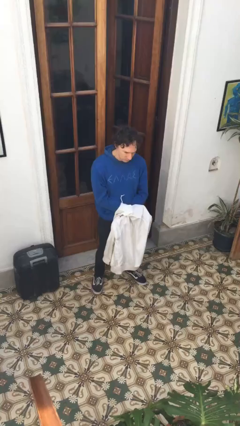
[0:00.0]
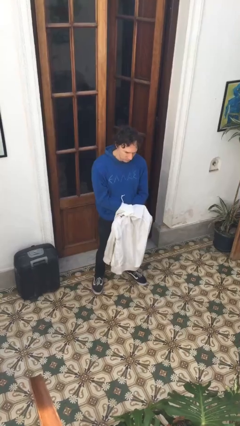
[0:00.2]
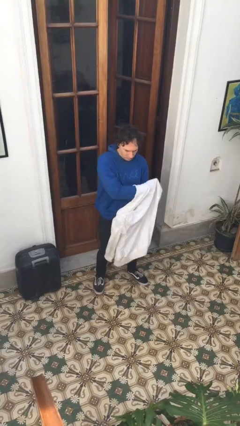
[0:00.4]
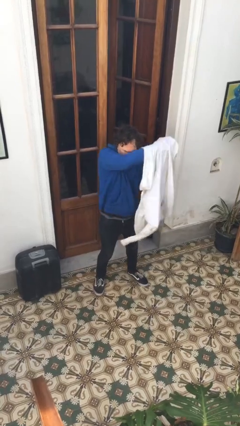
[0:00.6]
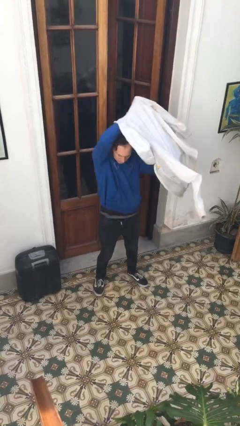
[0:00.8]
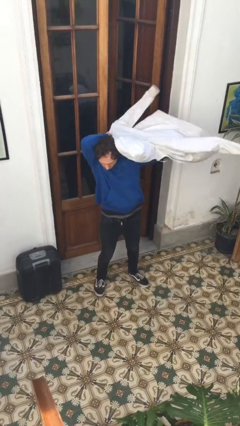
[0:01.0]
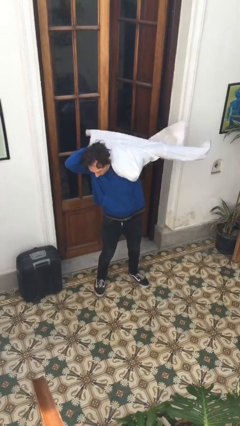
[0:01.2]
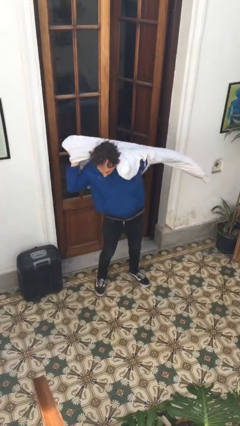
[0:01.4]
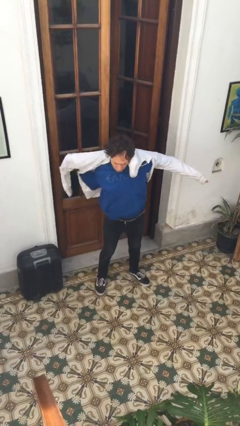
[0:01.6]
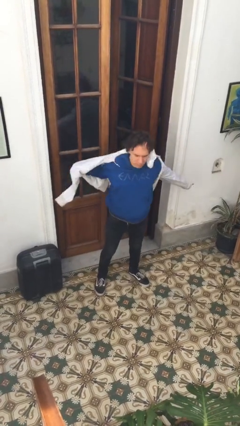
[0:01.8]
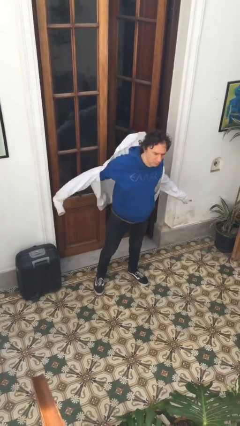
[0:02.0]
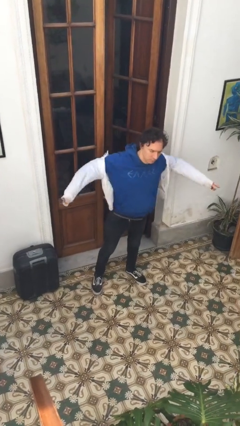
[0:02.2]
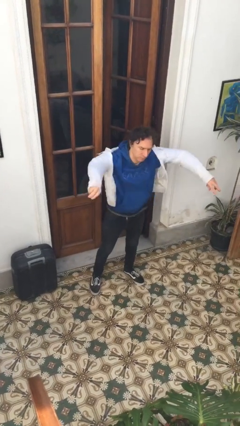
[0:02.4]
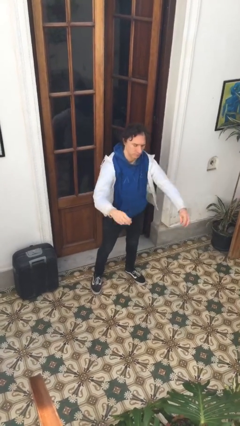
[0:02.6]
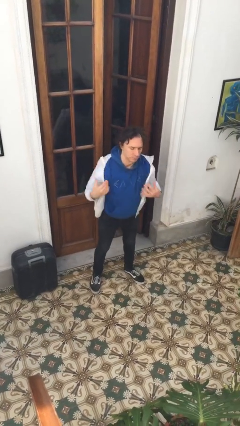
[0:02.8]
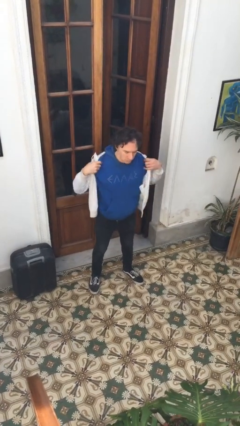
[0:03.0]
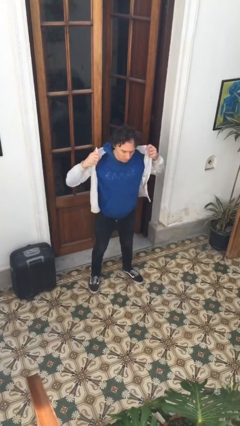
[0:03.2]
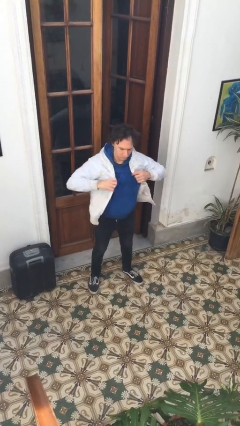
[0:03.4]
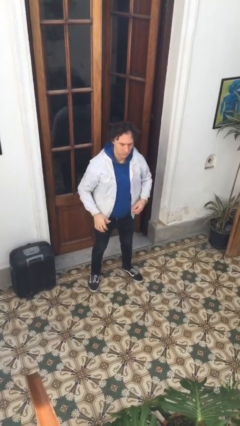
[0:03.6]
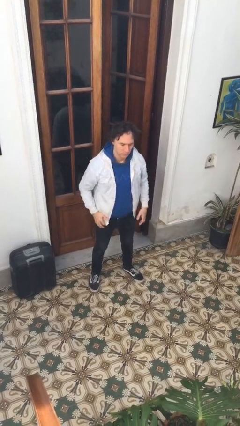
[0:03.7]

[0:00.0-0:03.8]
person puts on jacket

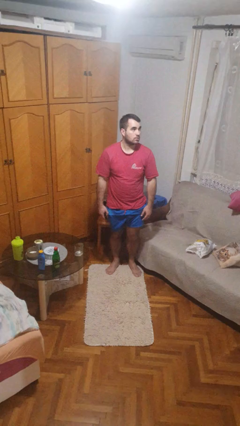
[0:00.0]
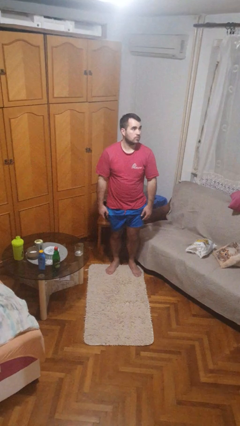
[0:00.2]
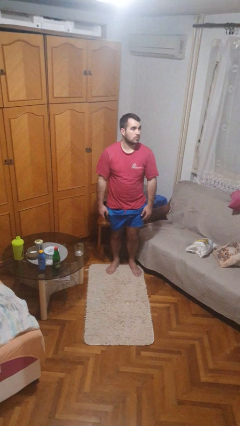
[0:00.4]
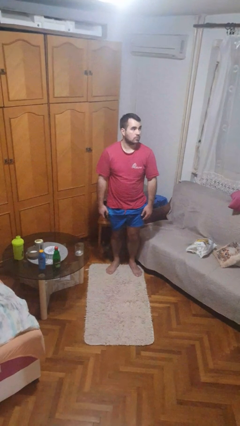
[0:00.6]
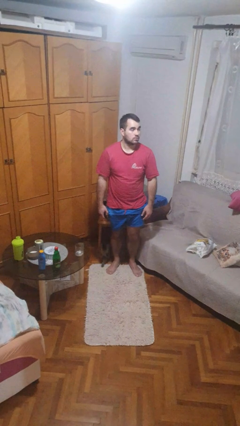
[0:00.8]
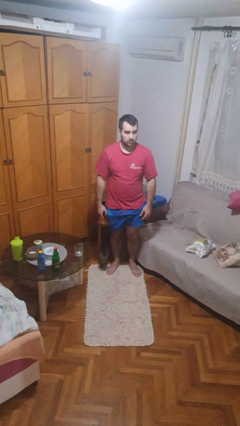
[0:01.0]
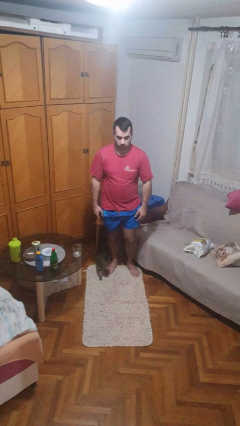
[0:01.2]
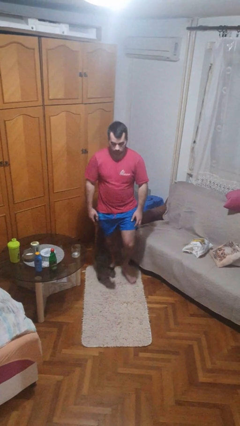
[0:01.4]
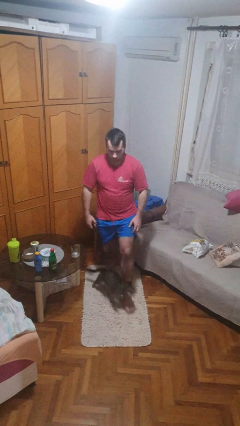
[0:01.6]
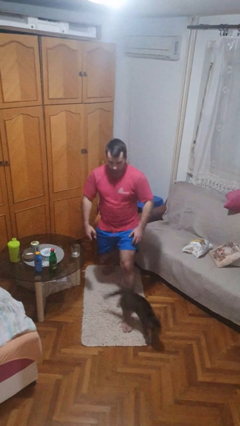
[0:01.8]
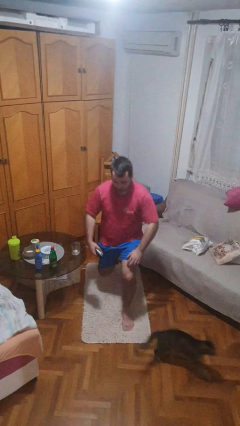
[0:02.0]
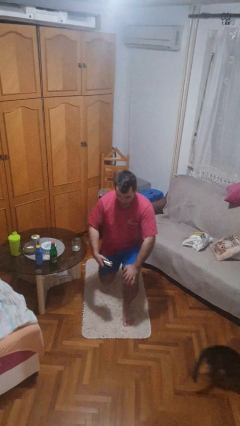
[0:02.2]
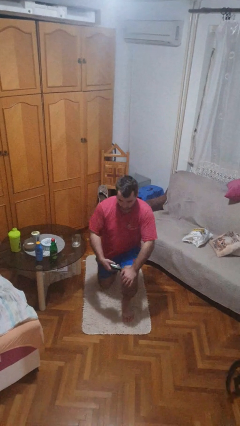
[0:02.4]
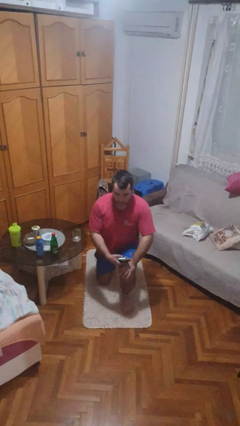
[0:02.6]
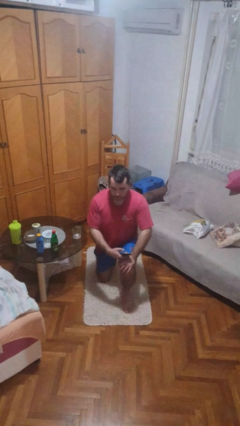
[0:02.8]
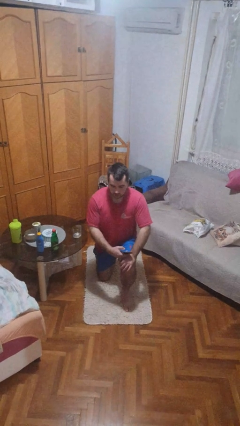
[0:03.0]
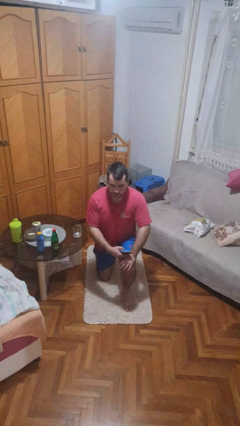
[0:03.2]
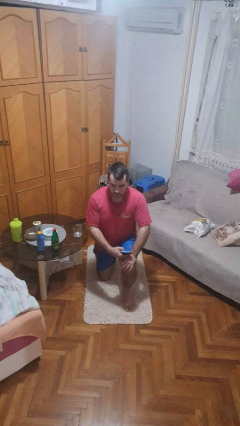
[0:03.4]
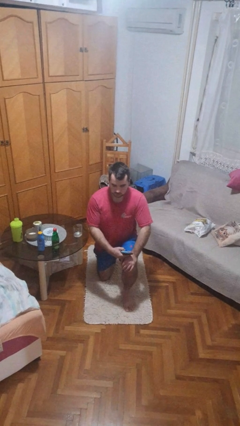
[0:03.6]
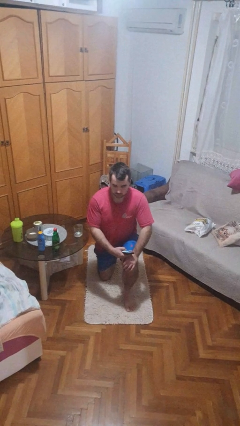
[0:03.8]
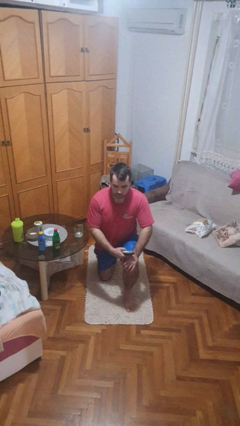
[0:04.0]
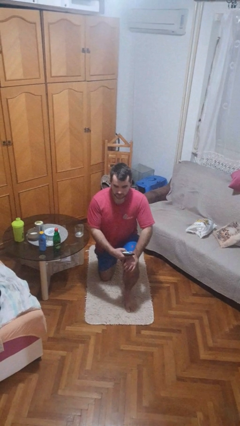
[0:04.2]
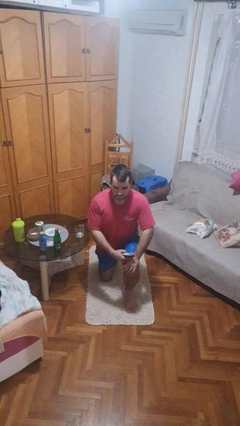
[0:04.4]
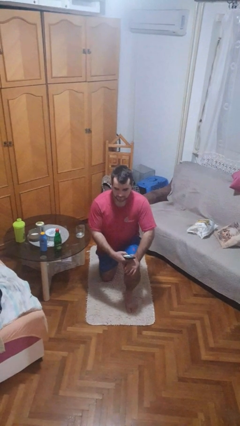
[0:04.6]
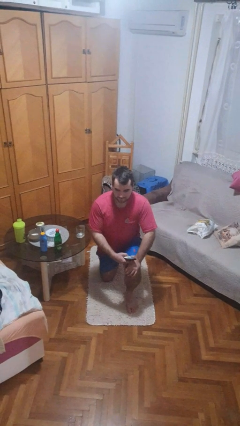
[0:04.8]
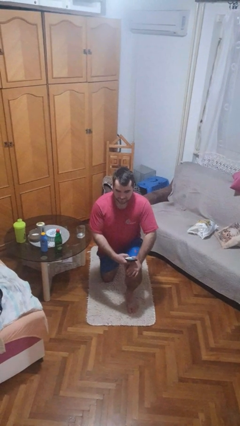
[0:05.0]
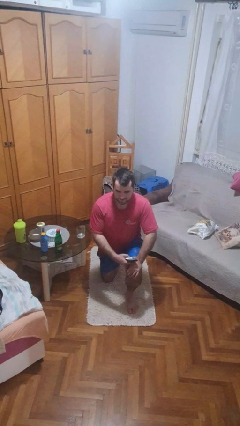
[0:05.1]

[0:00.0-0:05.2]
person kneels

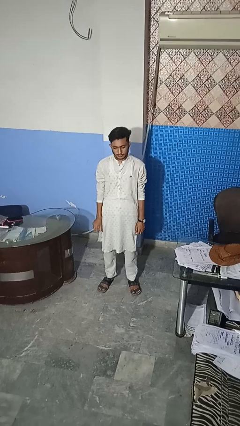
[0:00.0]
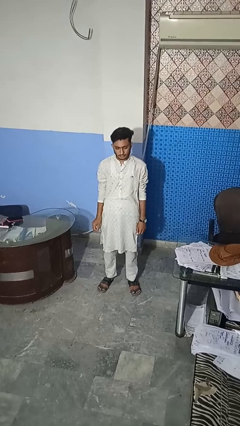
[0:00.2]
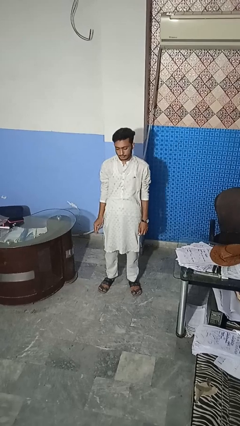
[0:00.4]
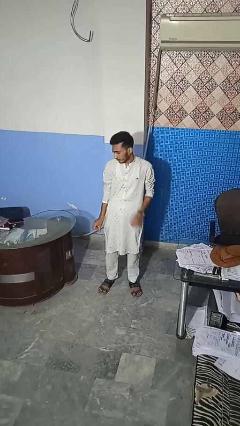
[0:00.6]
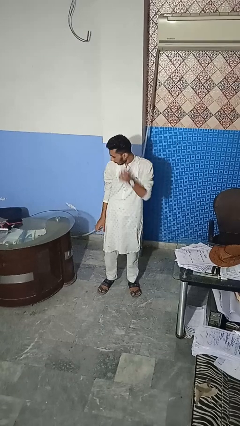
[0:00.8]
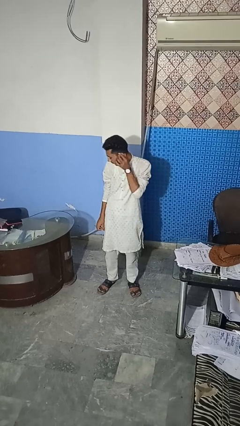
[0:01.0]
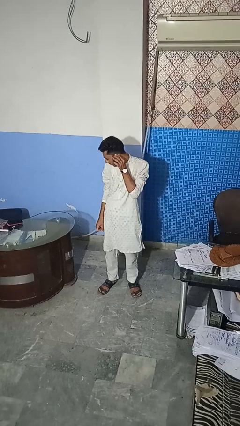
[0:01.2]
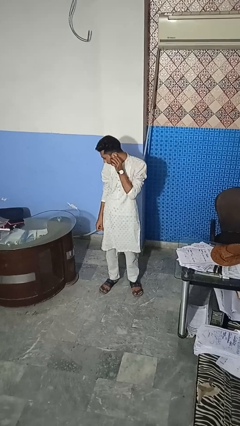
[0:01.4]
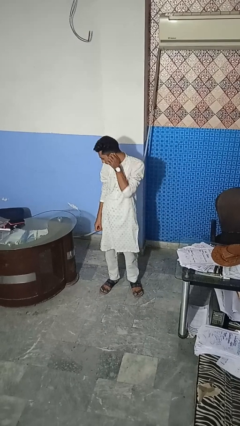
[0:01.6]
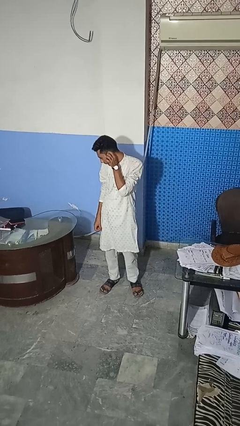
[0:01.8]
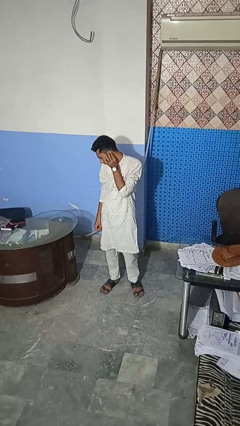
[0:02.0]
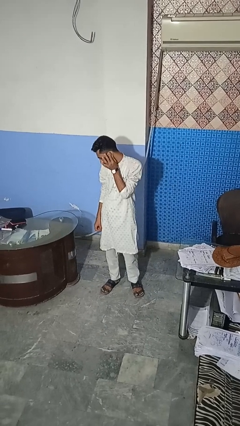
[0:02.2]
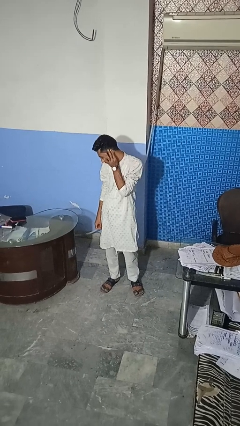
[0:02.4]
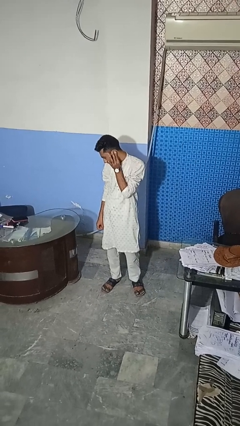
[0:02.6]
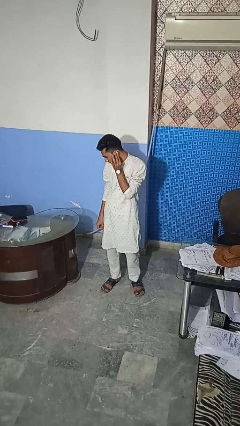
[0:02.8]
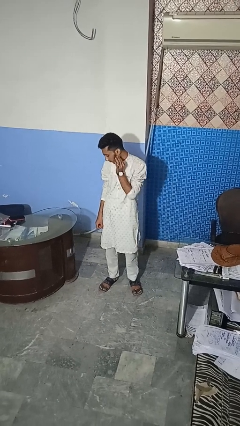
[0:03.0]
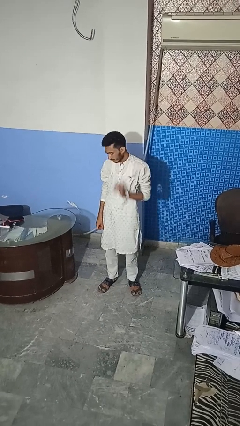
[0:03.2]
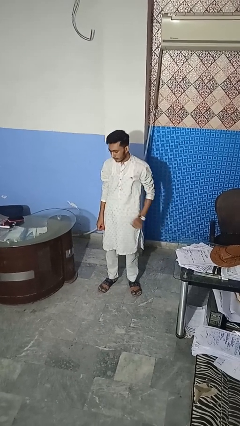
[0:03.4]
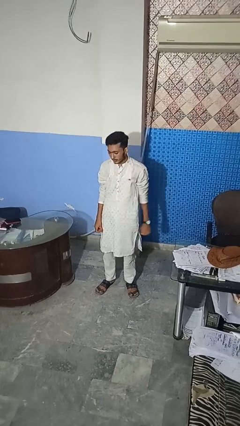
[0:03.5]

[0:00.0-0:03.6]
person touches earlobe

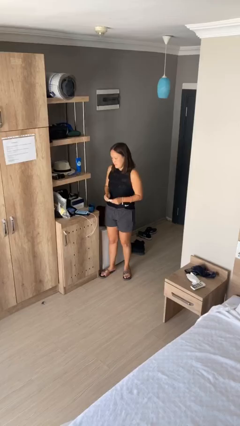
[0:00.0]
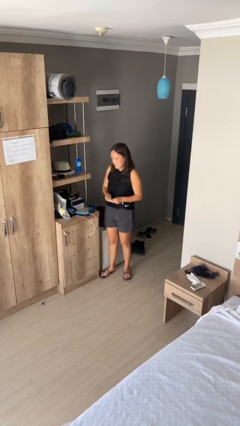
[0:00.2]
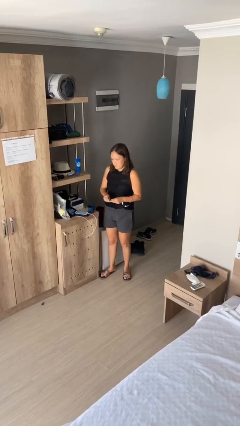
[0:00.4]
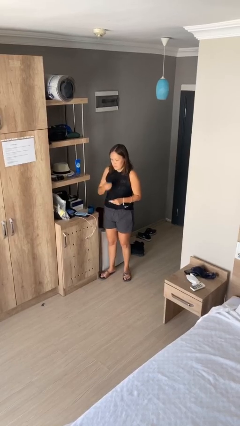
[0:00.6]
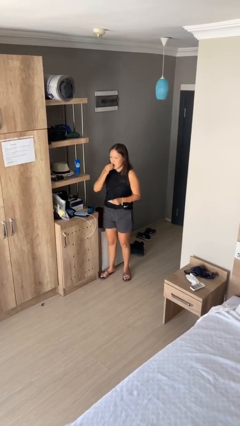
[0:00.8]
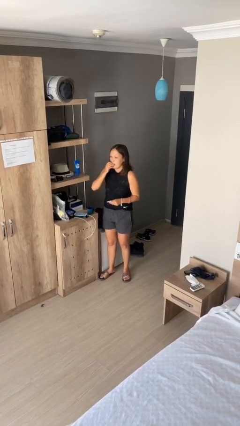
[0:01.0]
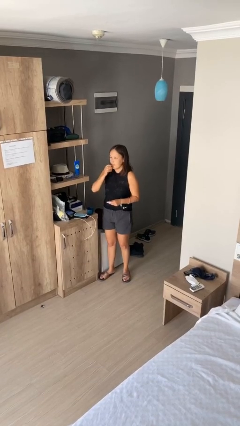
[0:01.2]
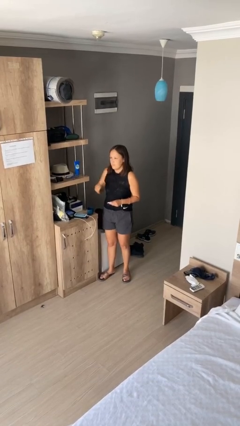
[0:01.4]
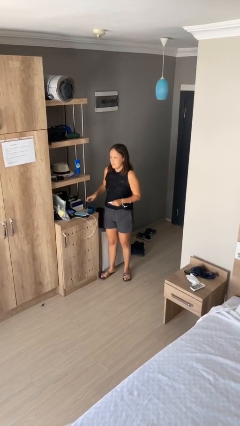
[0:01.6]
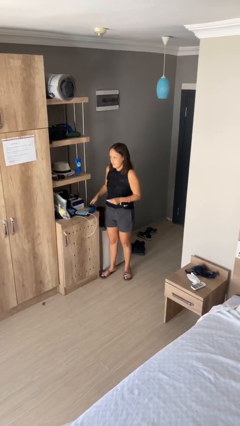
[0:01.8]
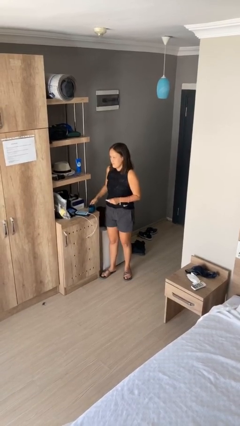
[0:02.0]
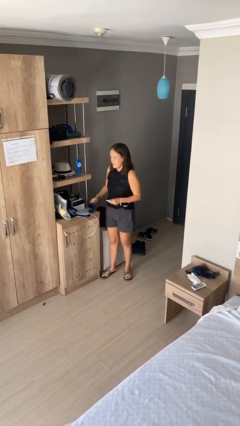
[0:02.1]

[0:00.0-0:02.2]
person takes medicine pills

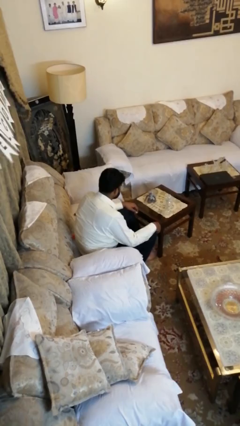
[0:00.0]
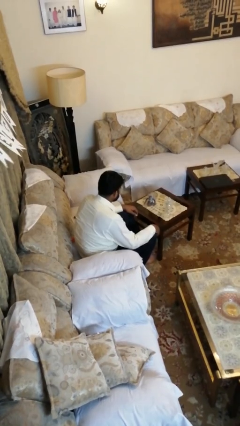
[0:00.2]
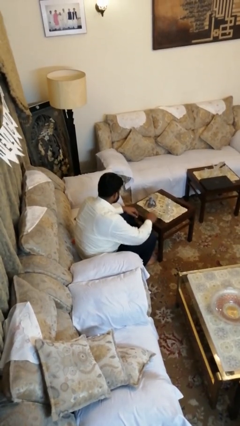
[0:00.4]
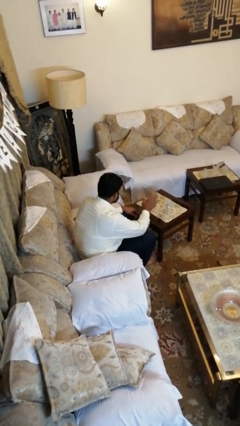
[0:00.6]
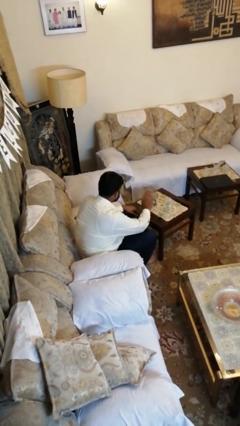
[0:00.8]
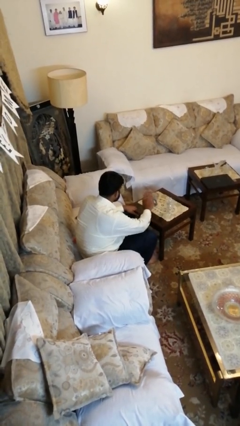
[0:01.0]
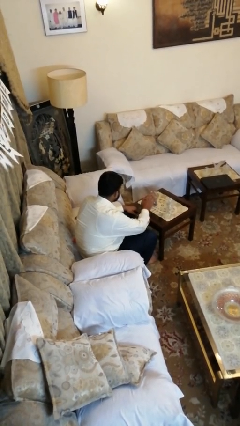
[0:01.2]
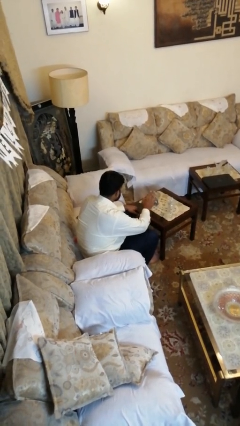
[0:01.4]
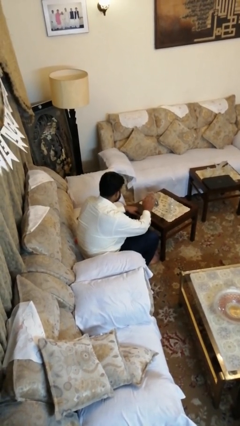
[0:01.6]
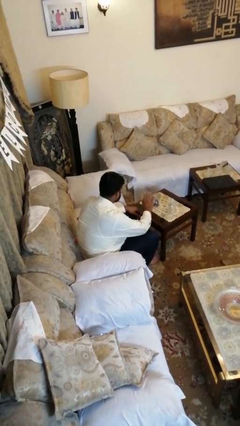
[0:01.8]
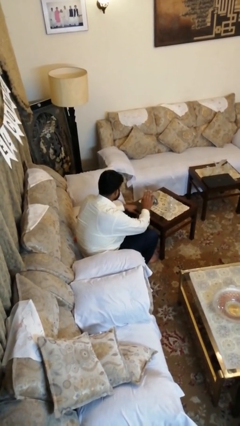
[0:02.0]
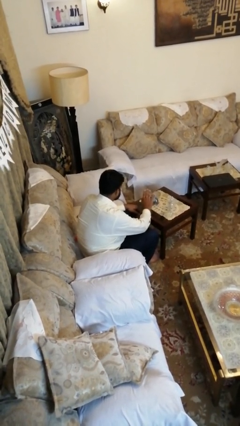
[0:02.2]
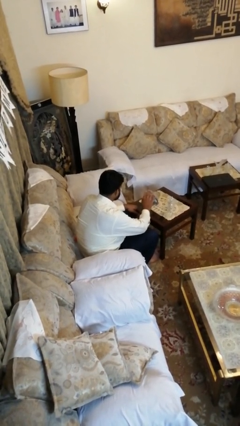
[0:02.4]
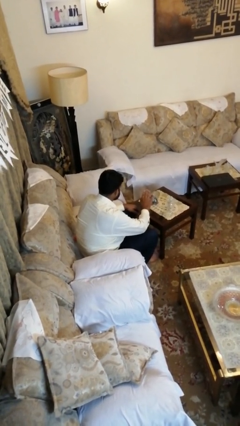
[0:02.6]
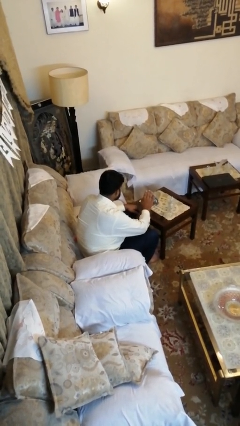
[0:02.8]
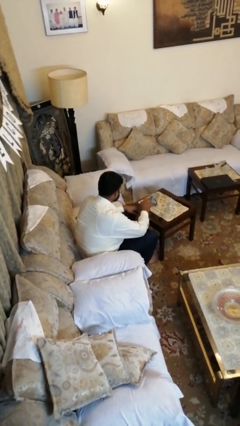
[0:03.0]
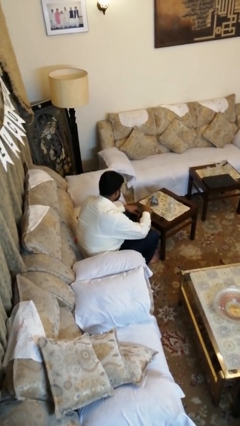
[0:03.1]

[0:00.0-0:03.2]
person waves hand over object
